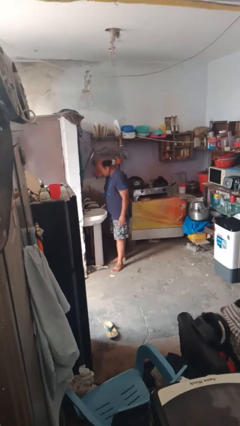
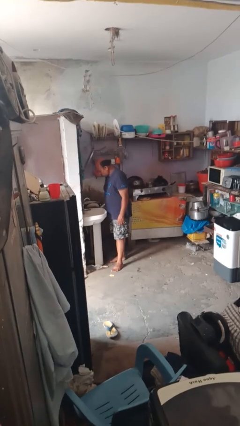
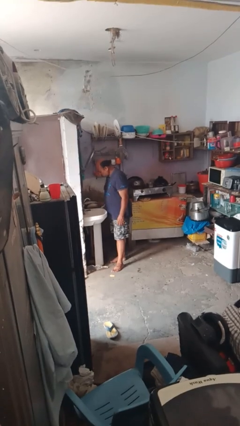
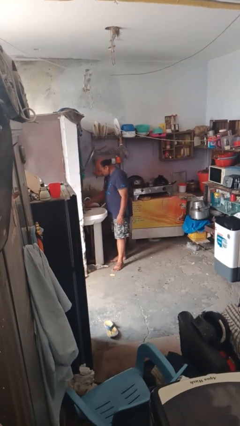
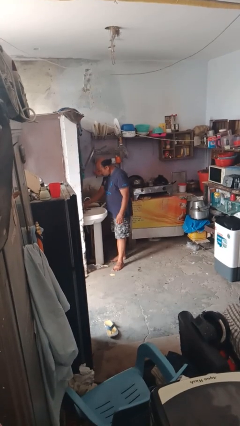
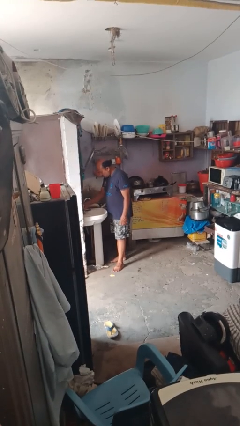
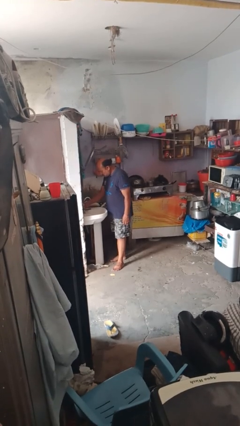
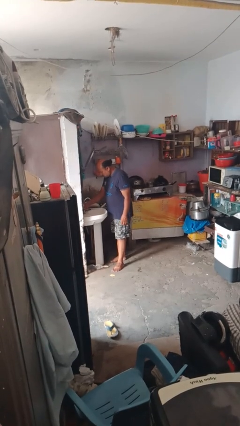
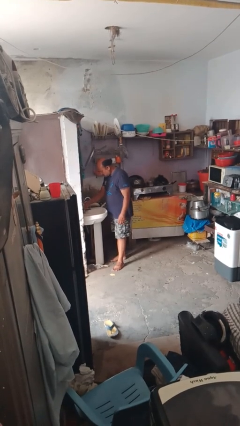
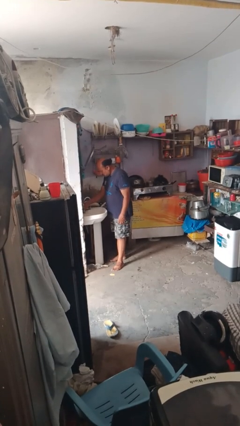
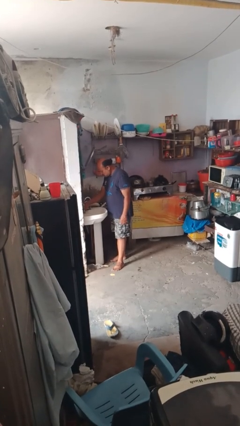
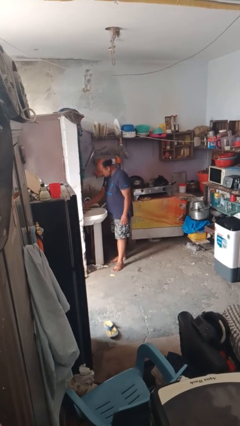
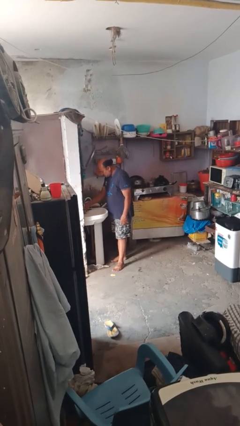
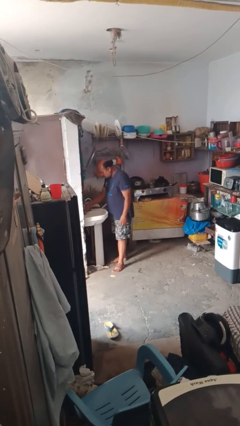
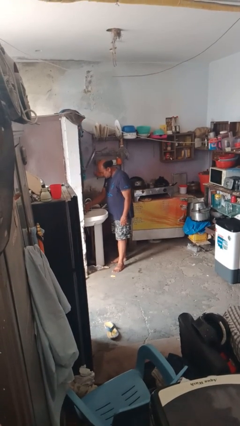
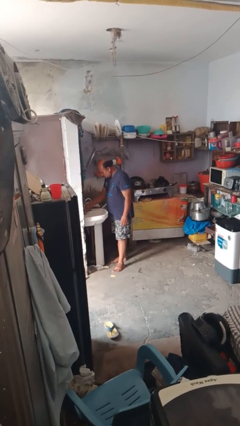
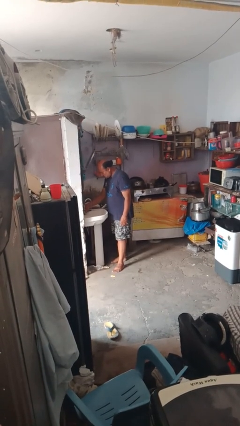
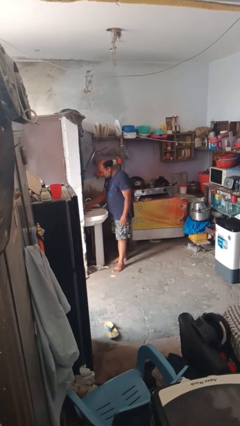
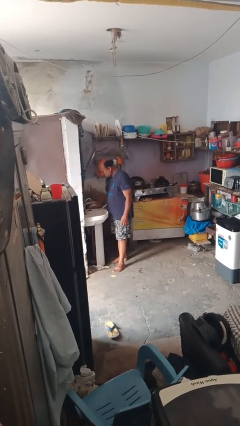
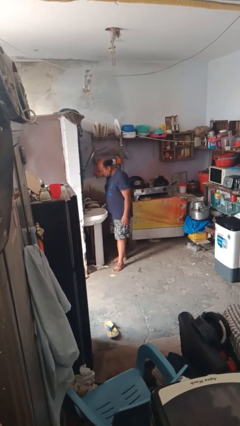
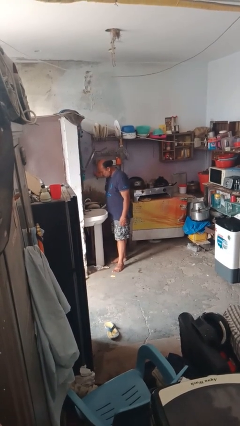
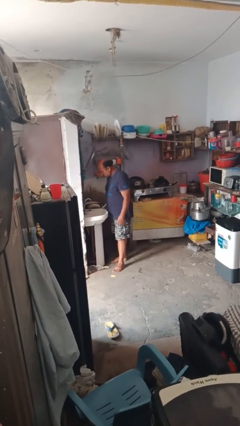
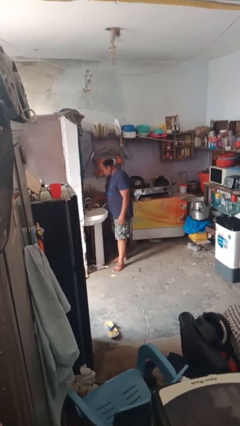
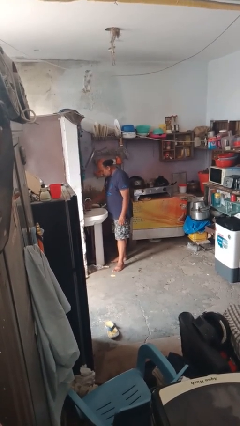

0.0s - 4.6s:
person turns on faucet

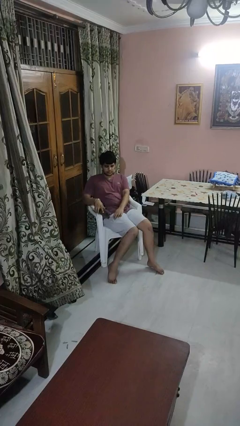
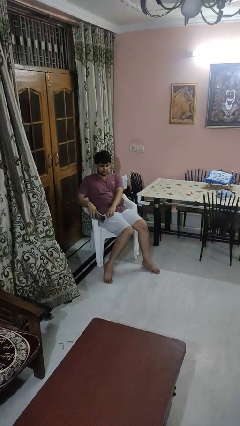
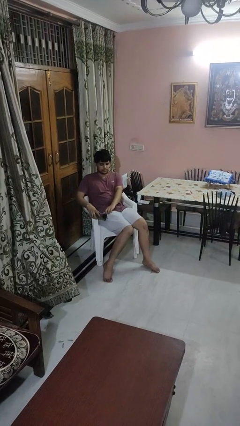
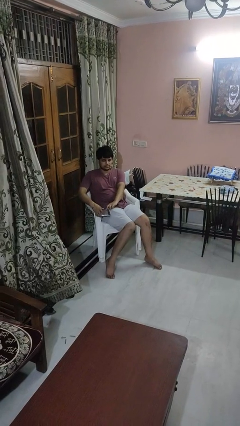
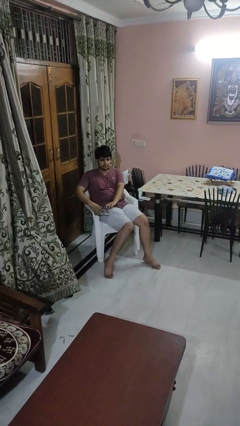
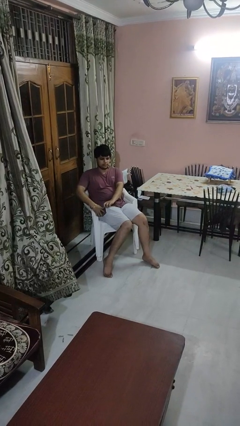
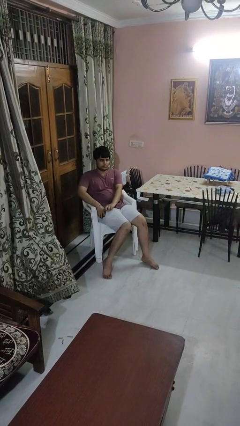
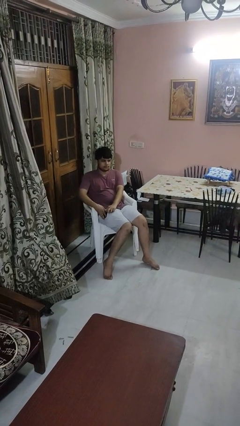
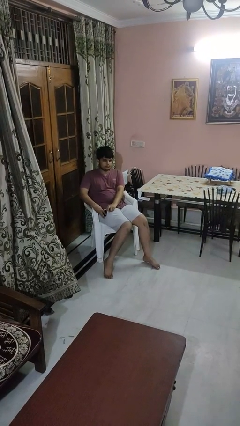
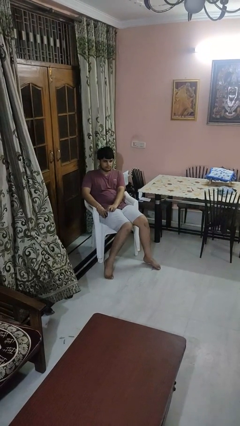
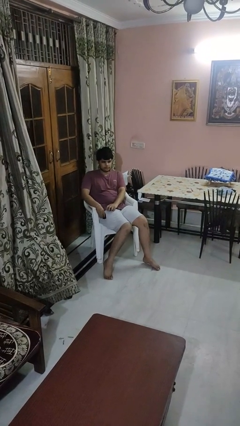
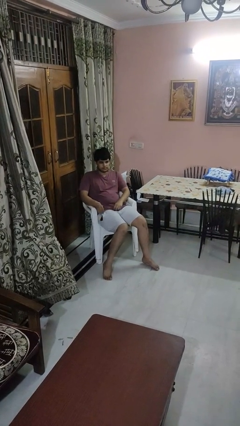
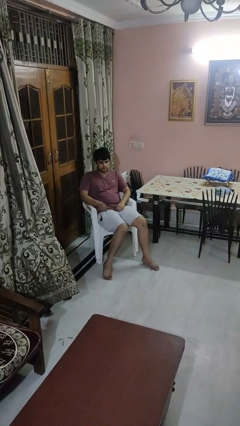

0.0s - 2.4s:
person puts phone into pocket

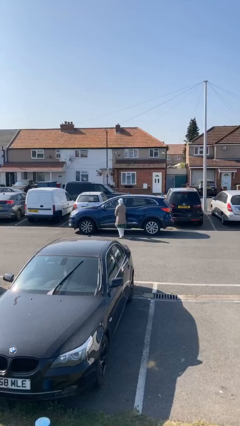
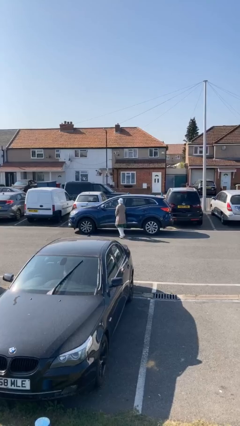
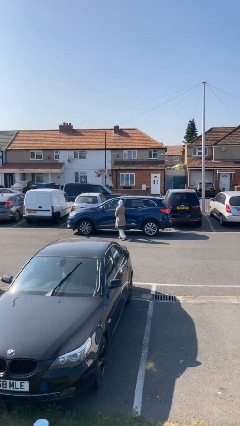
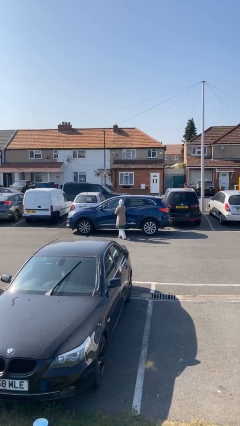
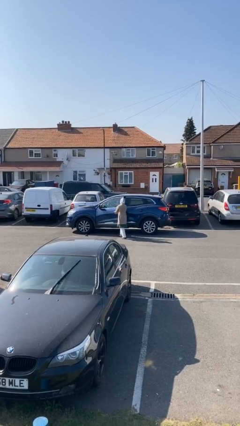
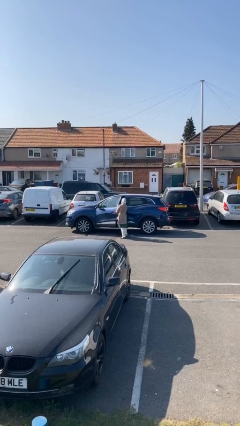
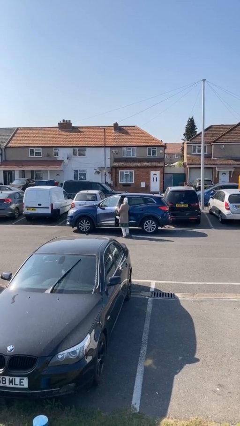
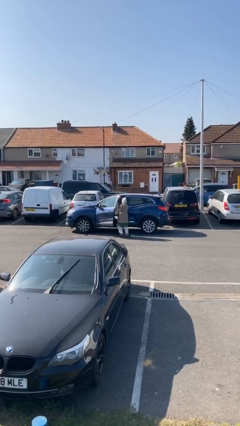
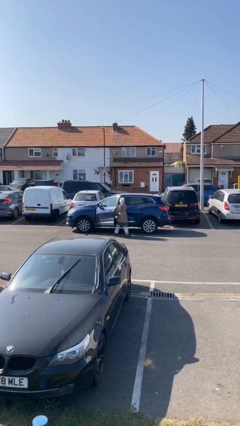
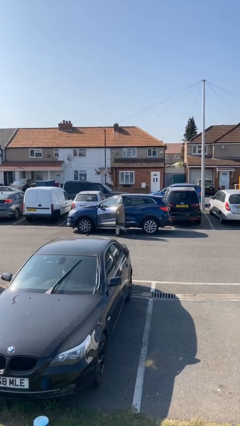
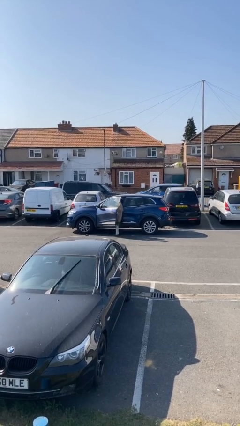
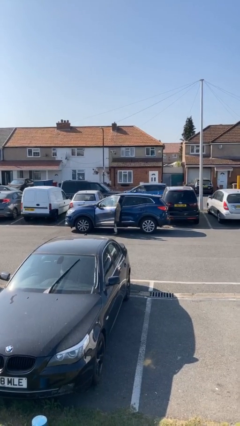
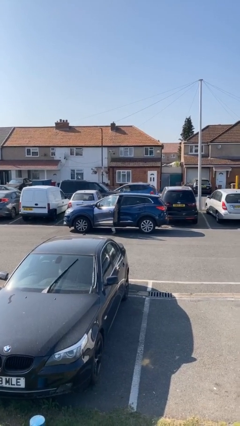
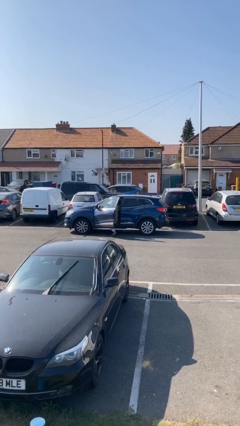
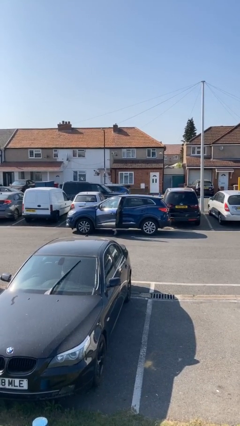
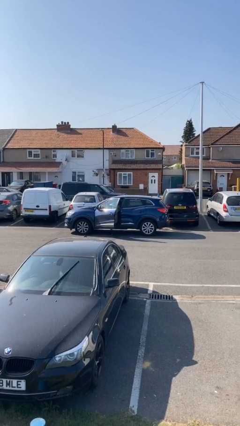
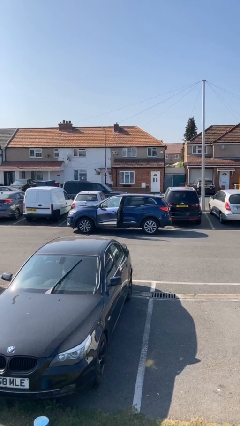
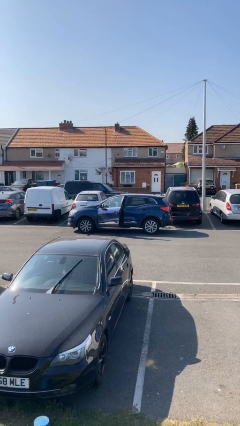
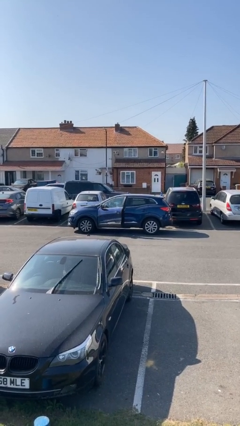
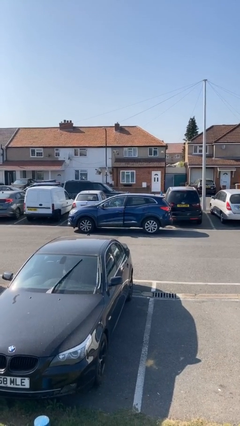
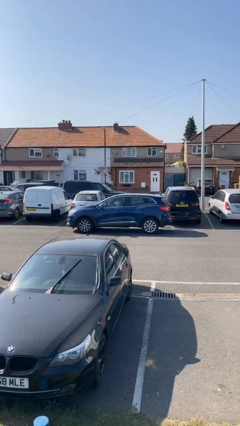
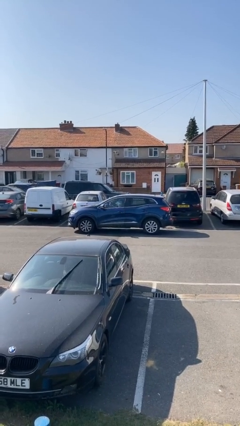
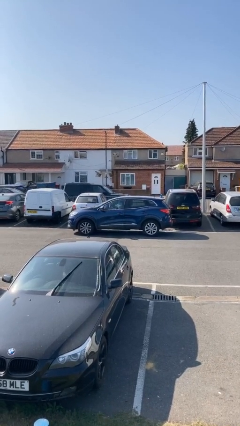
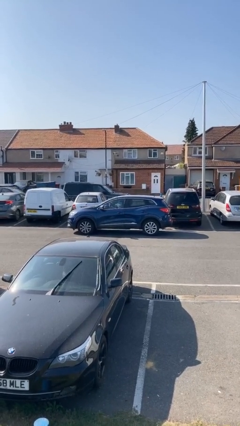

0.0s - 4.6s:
car picks up person

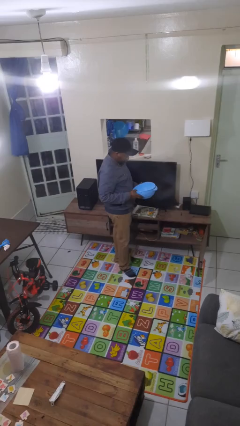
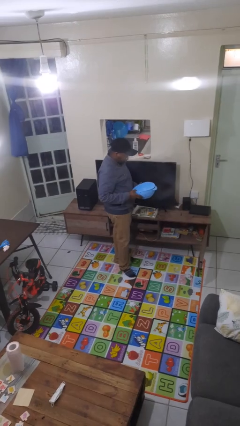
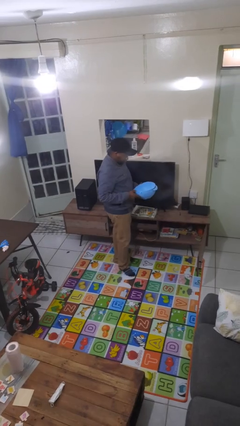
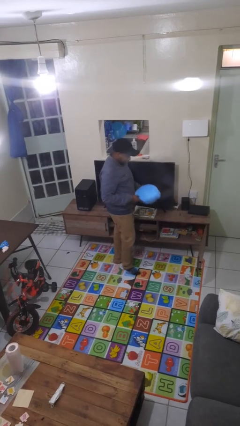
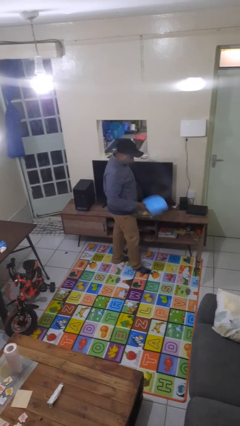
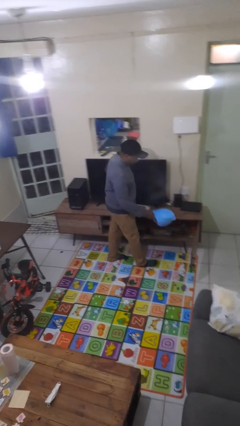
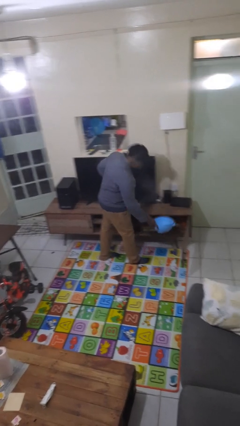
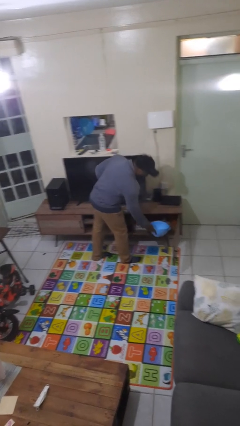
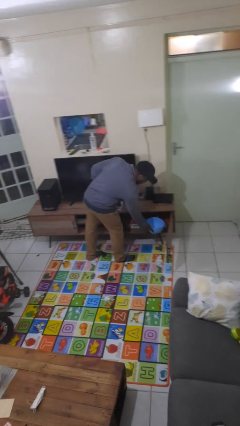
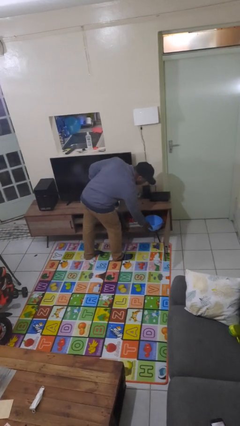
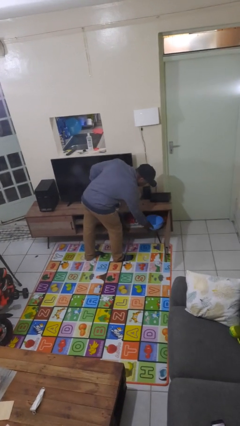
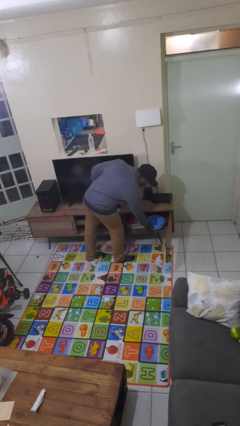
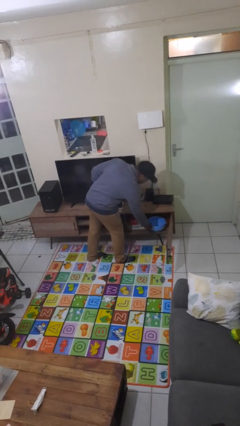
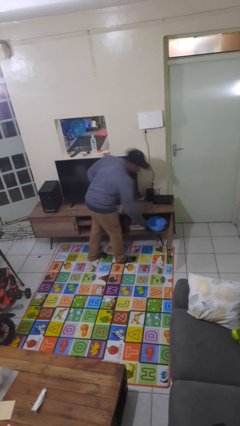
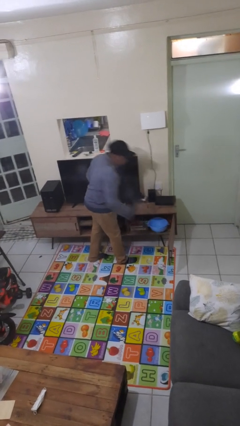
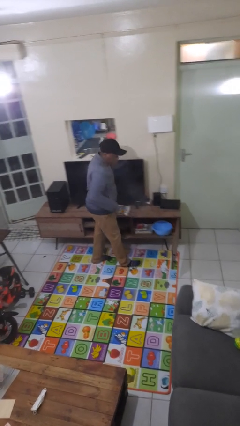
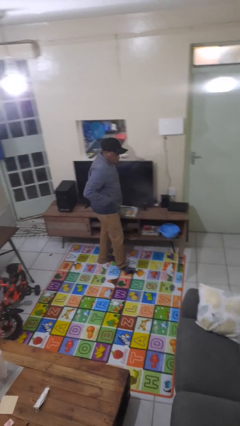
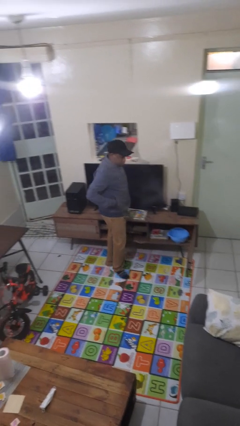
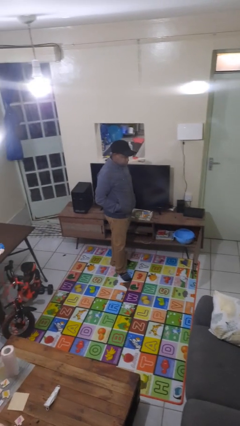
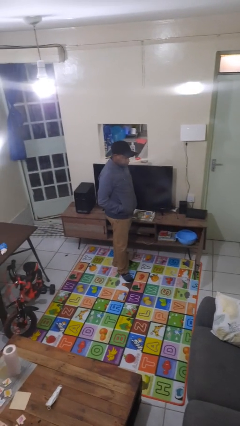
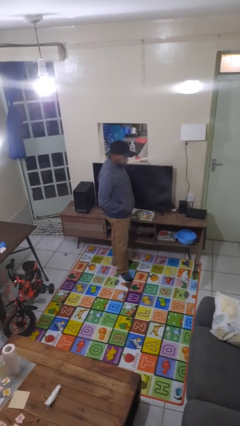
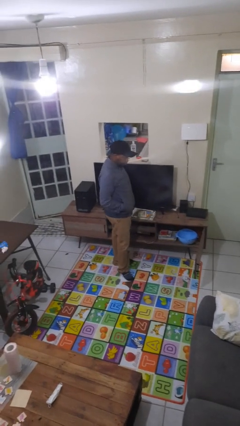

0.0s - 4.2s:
person puts down object into cabinet

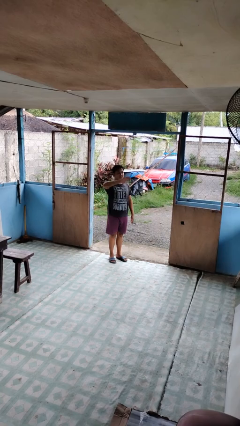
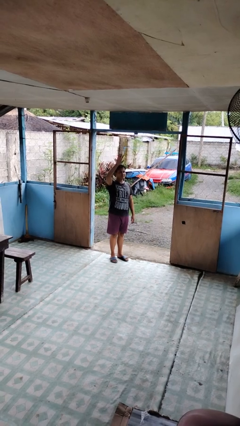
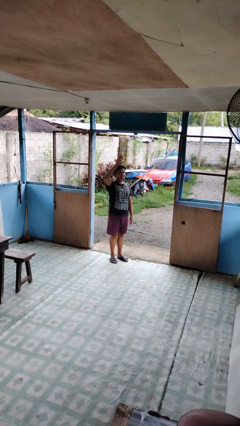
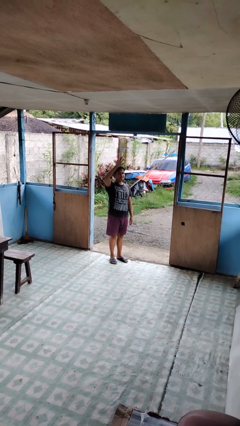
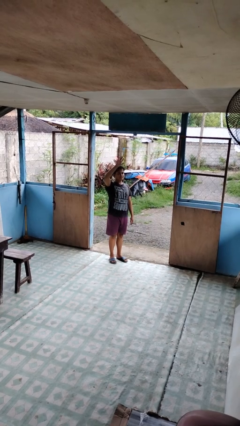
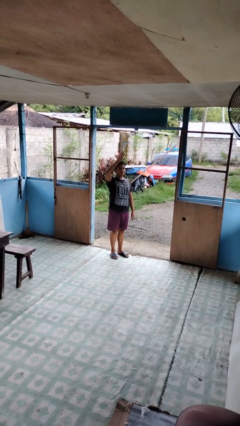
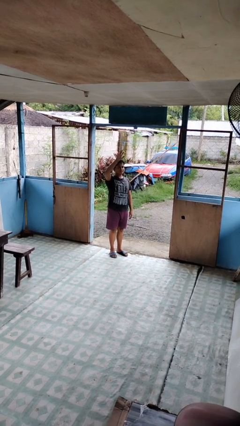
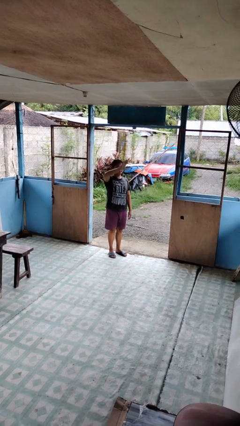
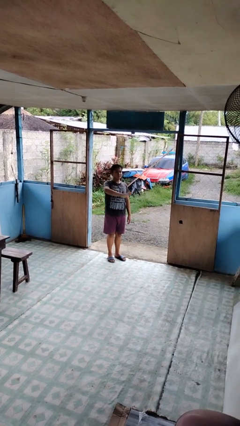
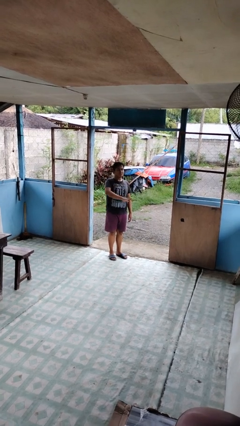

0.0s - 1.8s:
person gestures swipe up

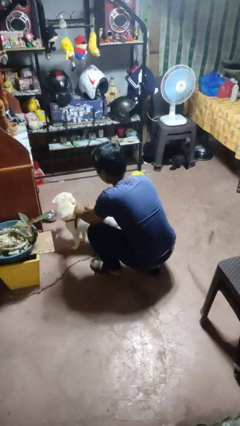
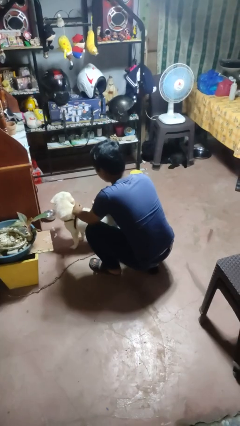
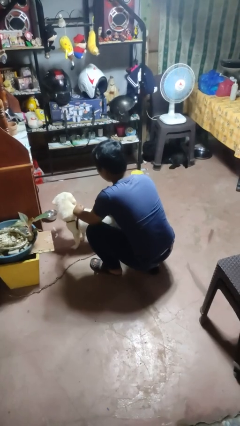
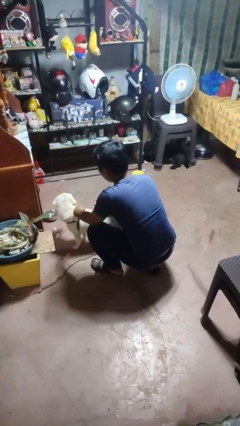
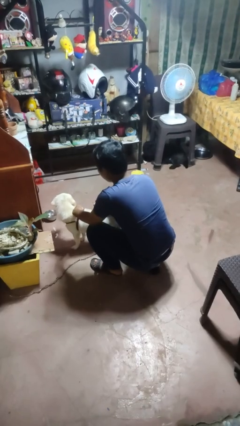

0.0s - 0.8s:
person unattaches leash from dog
